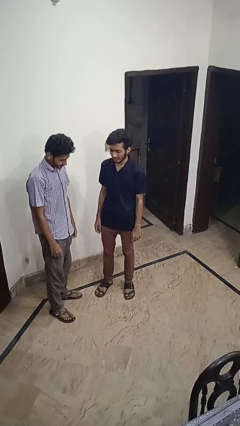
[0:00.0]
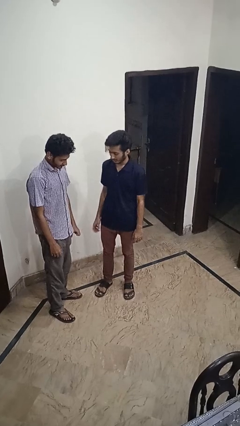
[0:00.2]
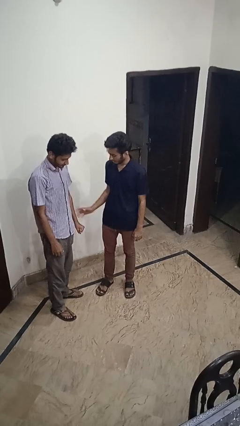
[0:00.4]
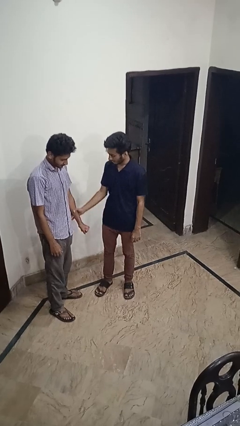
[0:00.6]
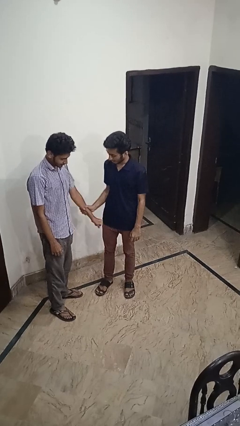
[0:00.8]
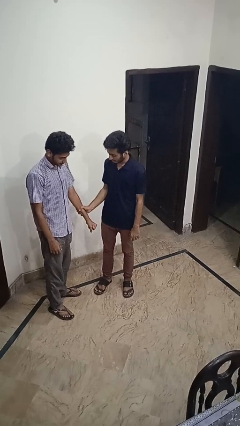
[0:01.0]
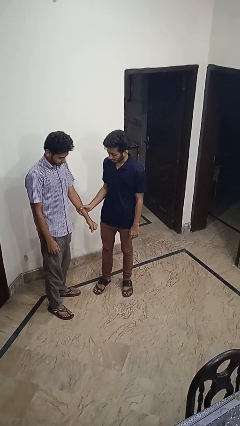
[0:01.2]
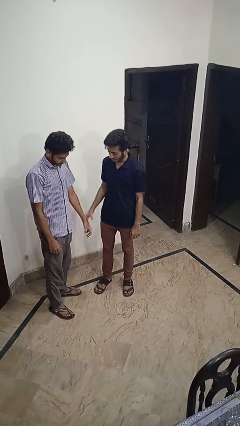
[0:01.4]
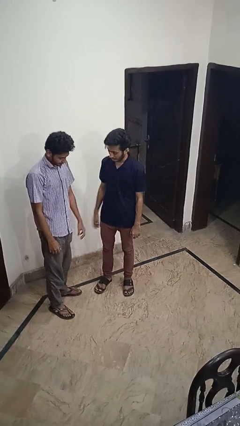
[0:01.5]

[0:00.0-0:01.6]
person grabs person by forearm

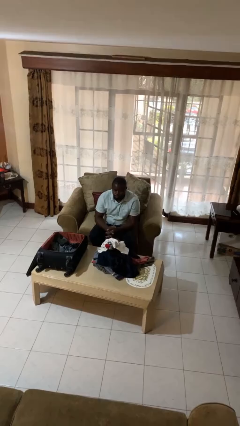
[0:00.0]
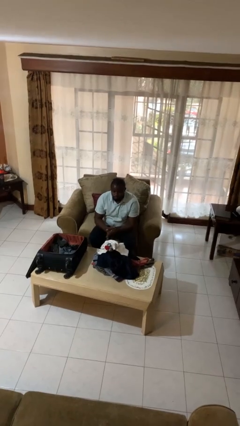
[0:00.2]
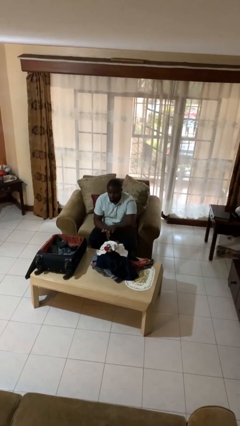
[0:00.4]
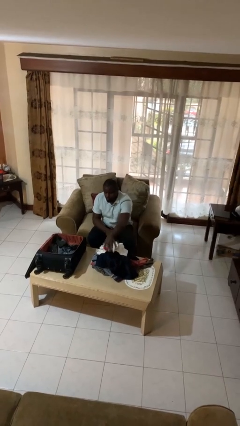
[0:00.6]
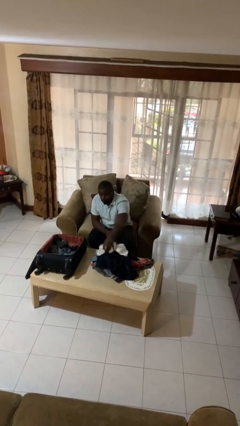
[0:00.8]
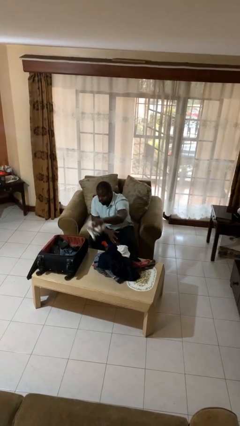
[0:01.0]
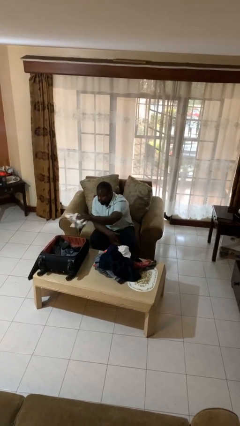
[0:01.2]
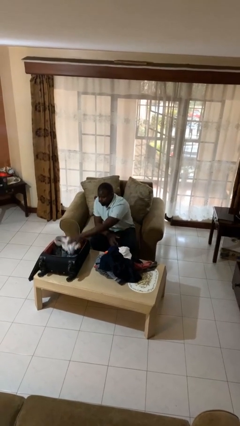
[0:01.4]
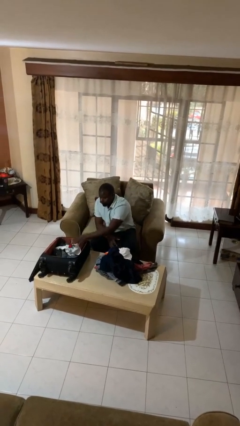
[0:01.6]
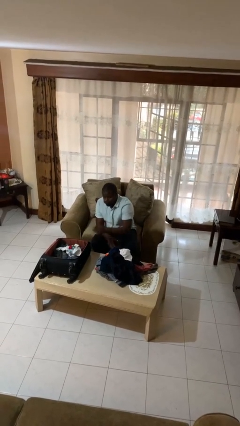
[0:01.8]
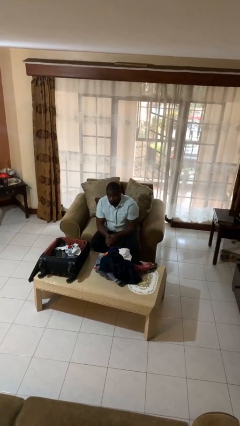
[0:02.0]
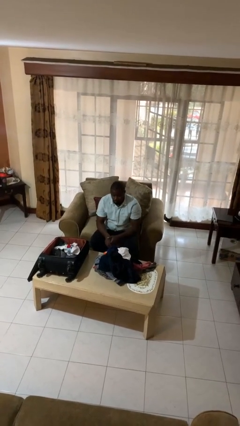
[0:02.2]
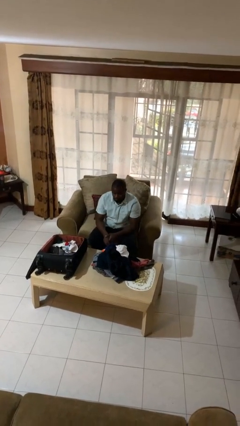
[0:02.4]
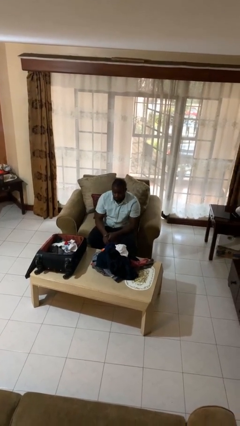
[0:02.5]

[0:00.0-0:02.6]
person loads clothes into suitcase

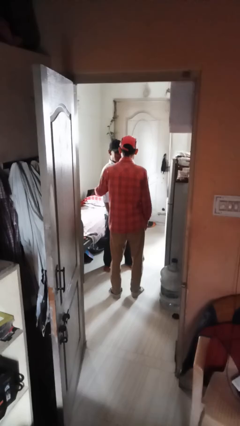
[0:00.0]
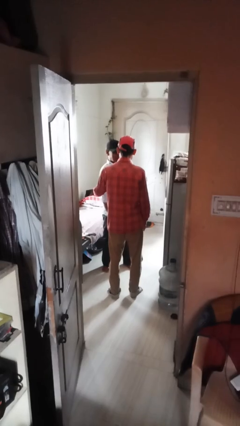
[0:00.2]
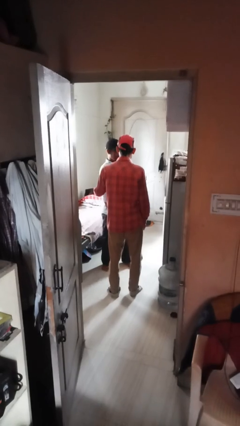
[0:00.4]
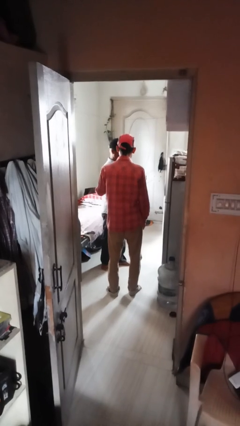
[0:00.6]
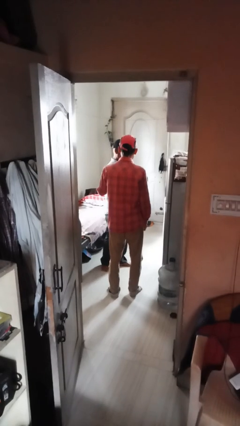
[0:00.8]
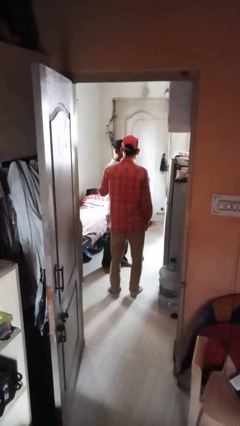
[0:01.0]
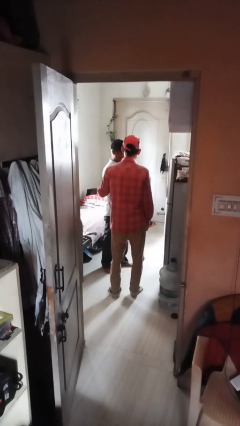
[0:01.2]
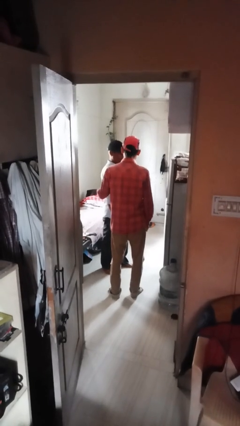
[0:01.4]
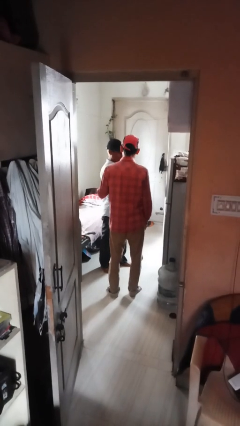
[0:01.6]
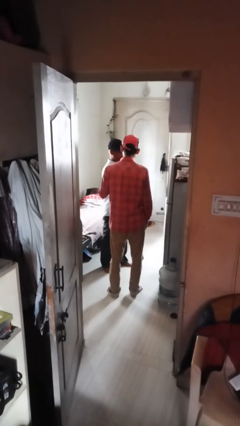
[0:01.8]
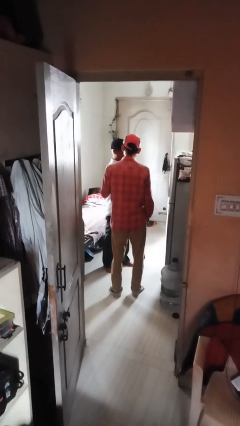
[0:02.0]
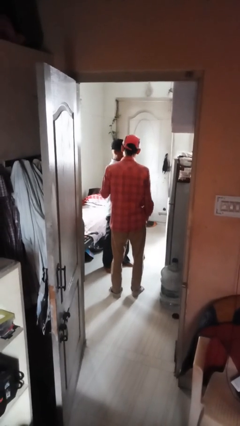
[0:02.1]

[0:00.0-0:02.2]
person spins person around

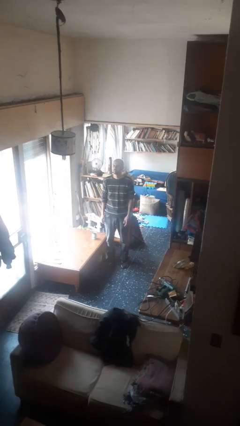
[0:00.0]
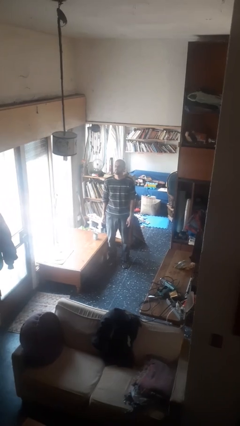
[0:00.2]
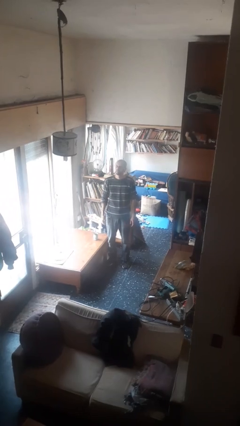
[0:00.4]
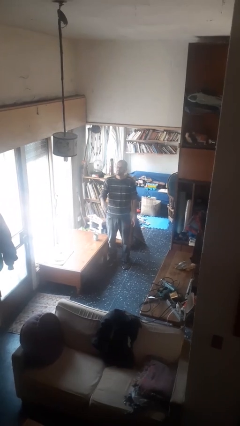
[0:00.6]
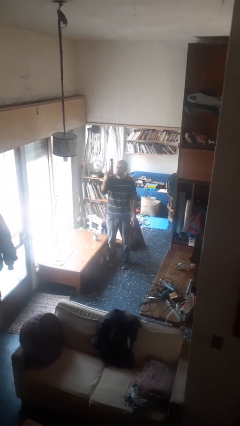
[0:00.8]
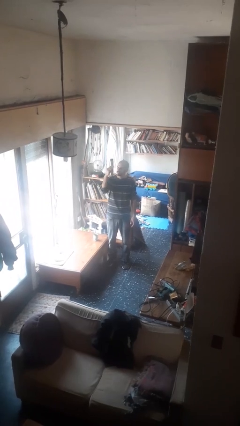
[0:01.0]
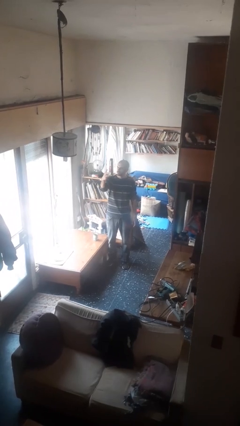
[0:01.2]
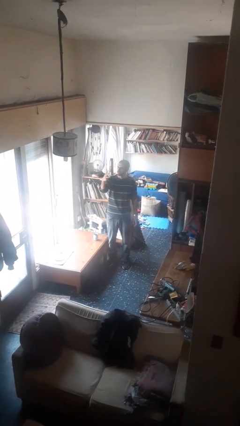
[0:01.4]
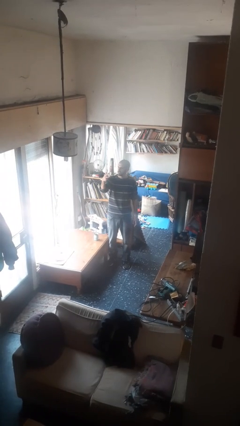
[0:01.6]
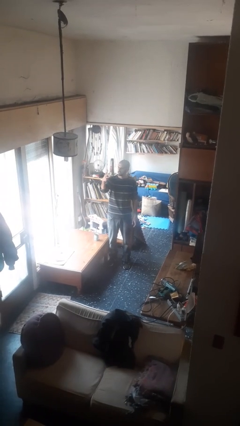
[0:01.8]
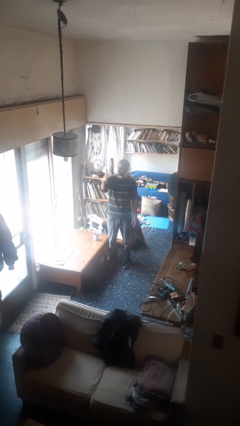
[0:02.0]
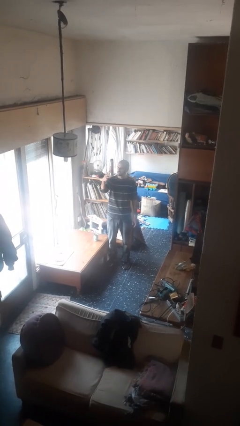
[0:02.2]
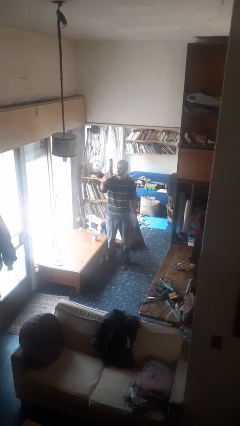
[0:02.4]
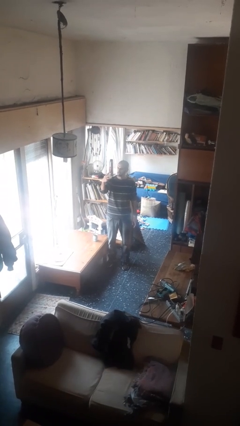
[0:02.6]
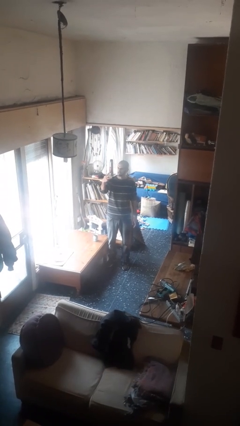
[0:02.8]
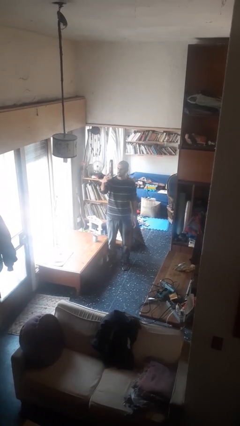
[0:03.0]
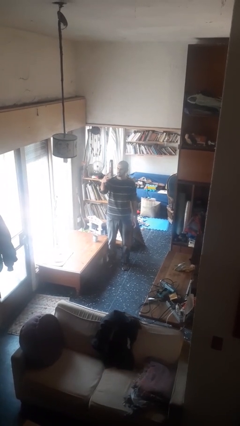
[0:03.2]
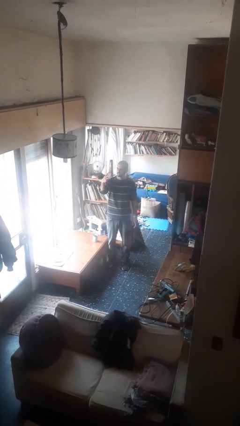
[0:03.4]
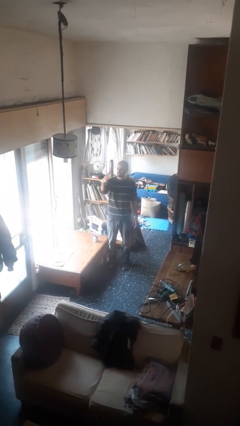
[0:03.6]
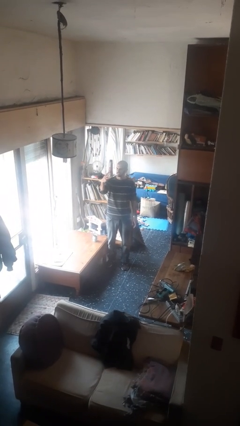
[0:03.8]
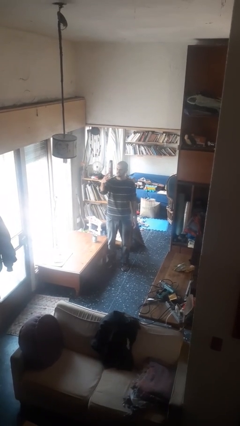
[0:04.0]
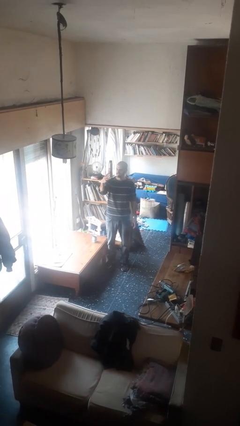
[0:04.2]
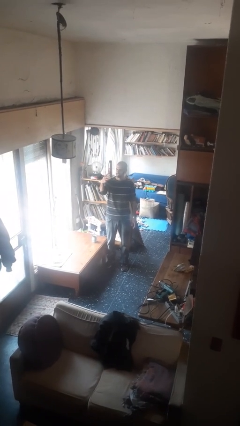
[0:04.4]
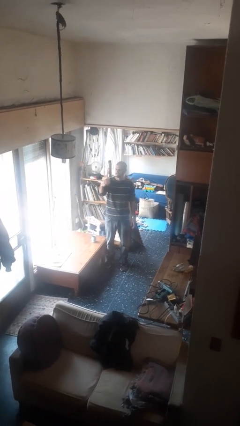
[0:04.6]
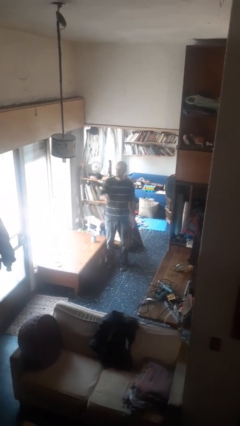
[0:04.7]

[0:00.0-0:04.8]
person gestures number three

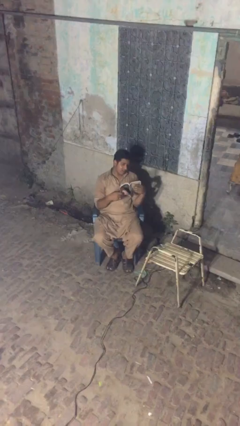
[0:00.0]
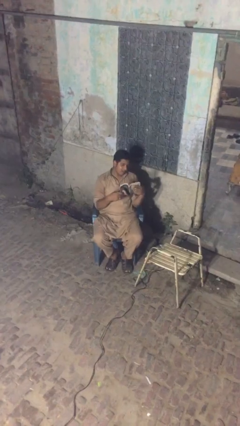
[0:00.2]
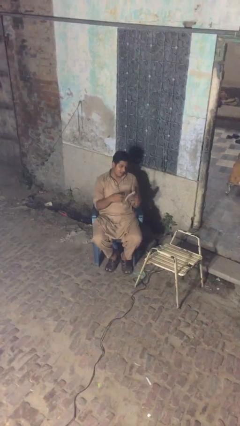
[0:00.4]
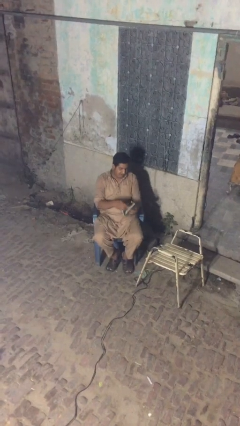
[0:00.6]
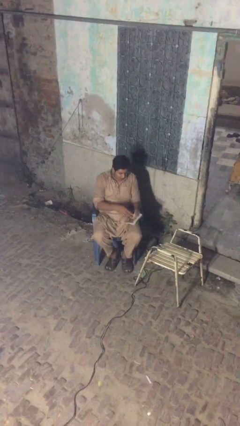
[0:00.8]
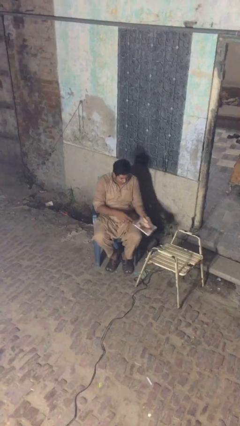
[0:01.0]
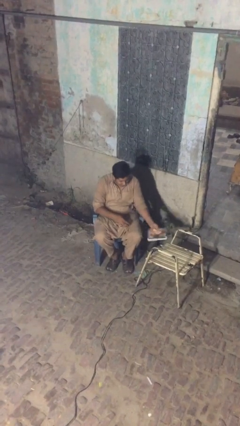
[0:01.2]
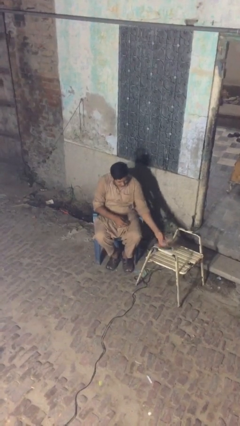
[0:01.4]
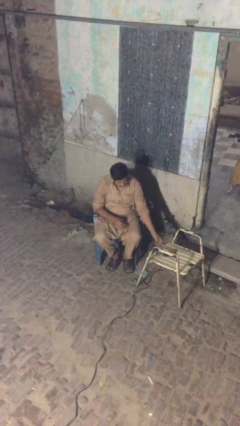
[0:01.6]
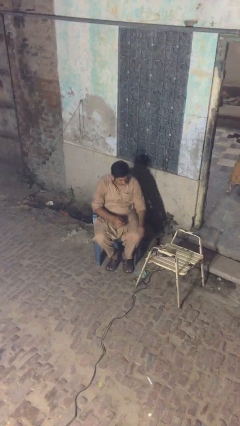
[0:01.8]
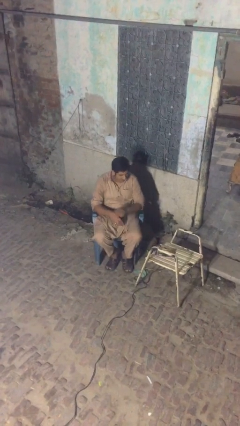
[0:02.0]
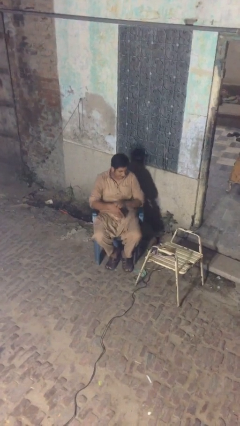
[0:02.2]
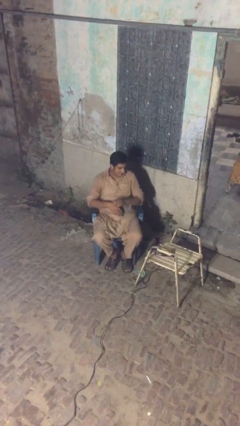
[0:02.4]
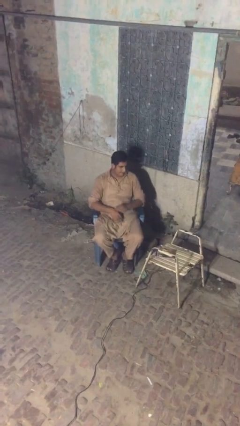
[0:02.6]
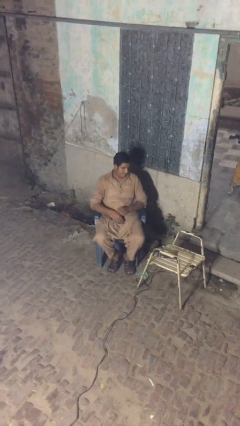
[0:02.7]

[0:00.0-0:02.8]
person puts down object on table

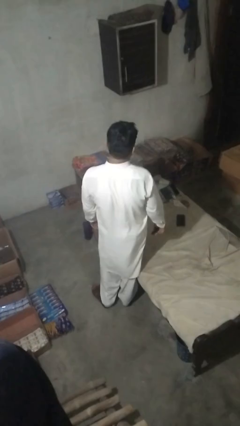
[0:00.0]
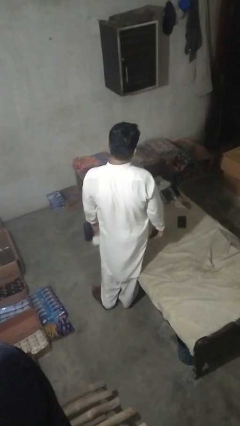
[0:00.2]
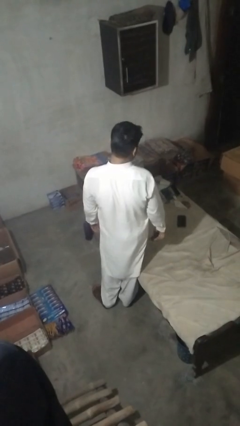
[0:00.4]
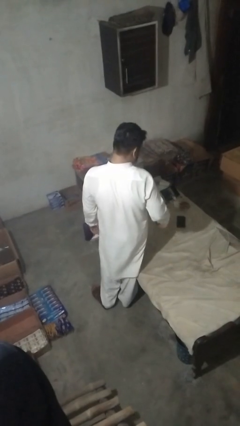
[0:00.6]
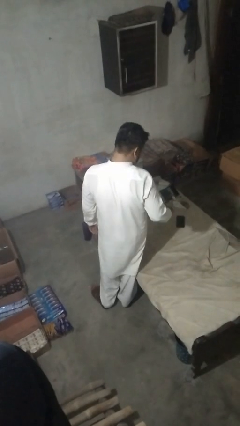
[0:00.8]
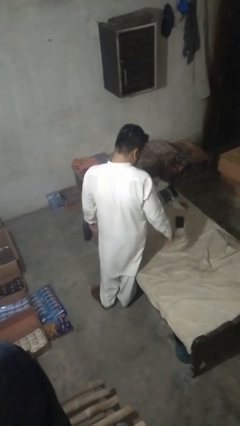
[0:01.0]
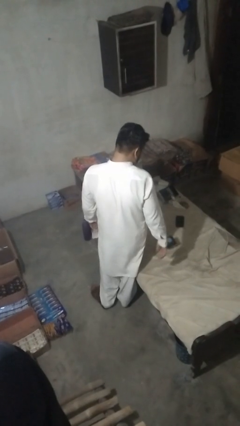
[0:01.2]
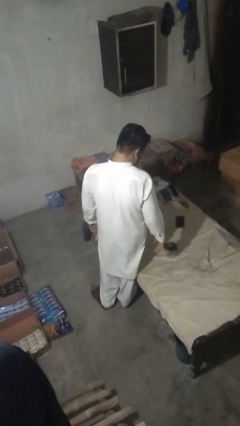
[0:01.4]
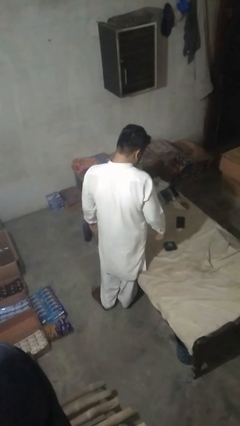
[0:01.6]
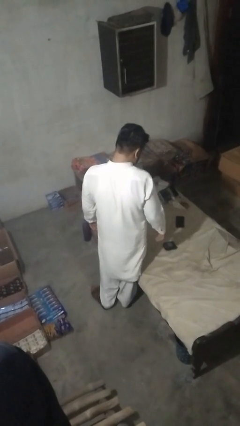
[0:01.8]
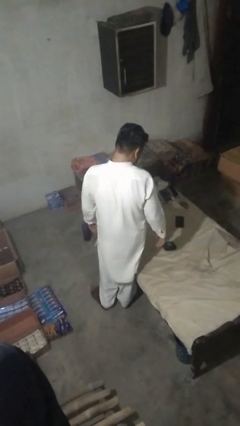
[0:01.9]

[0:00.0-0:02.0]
person throws object on bed

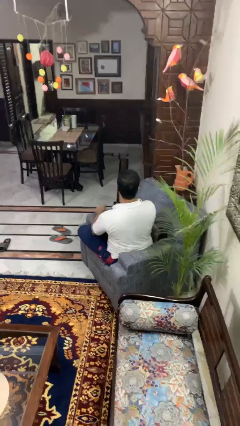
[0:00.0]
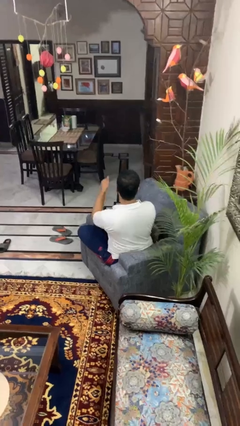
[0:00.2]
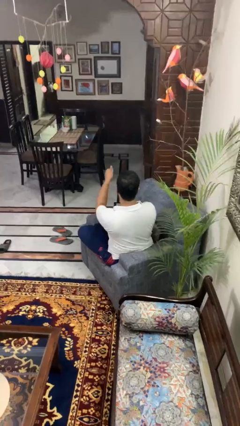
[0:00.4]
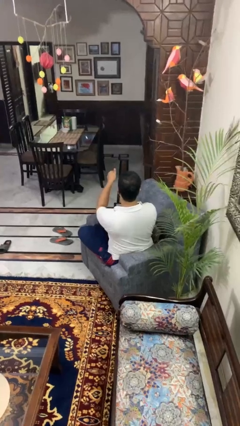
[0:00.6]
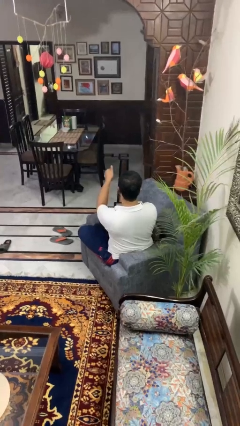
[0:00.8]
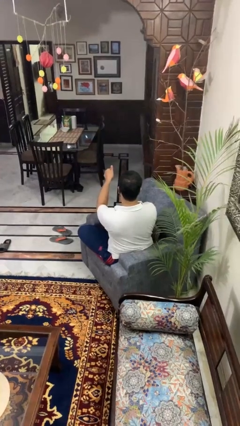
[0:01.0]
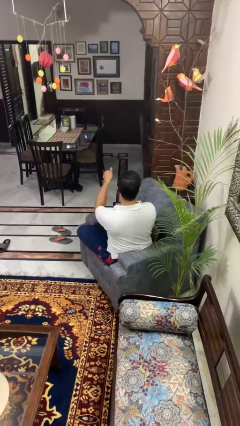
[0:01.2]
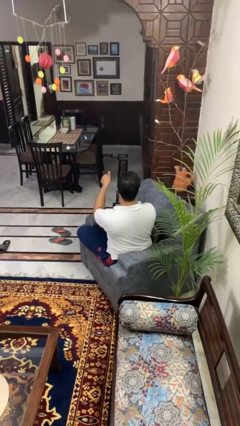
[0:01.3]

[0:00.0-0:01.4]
person gestures thumbs up
